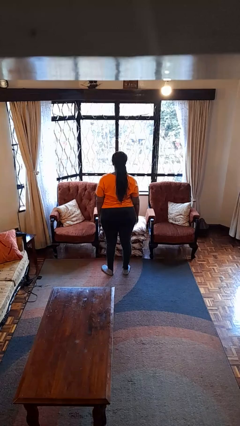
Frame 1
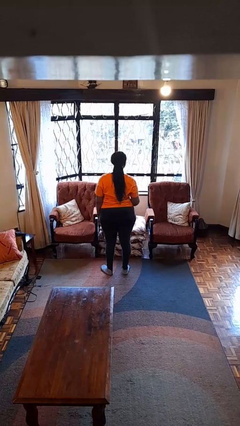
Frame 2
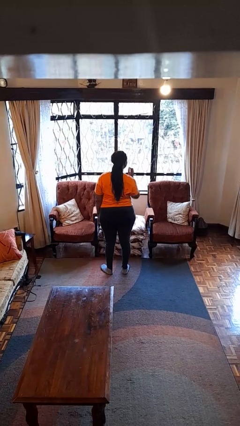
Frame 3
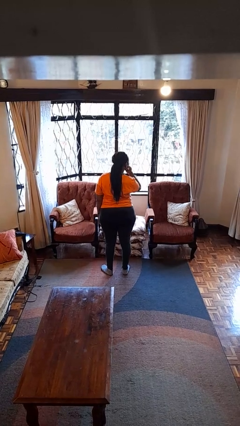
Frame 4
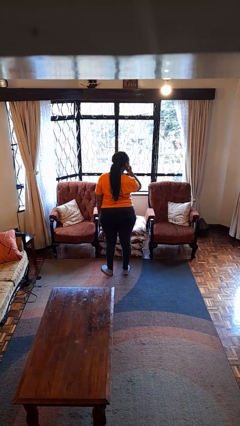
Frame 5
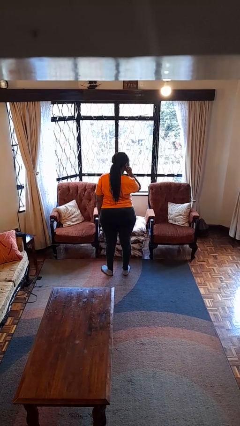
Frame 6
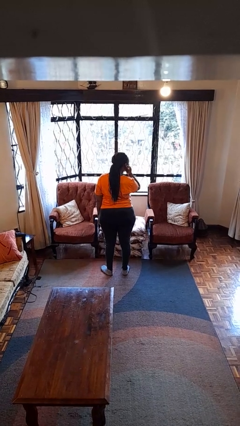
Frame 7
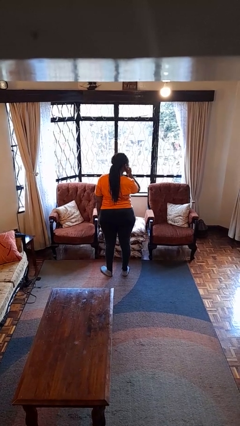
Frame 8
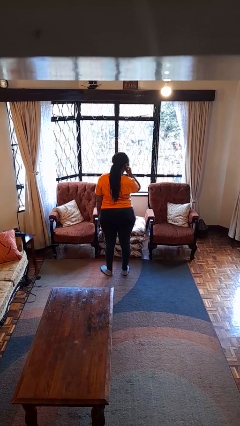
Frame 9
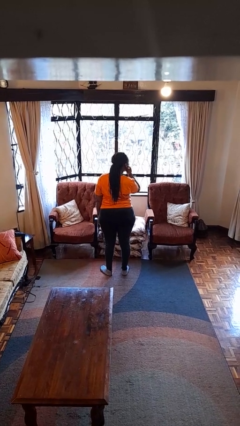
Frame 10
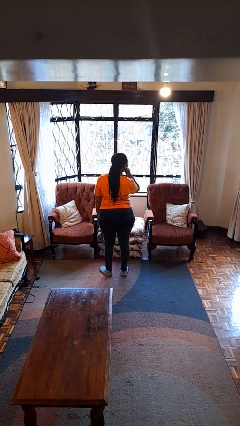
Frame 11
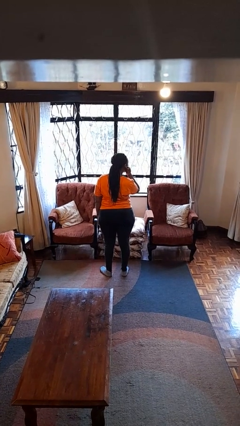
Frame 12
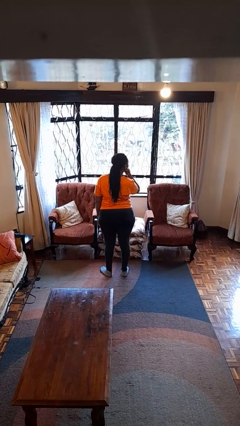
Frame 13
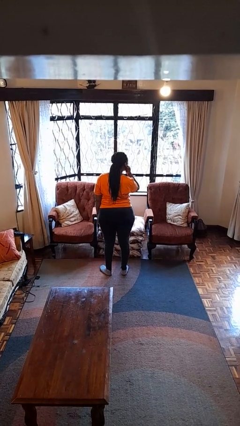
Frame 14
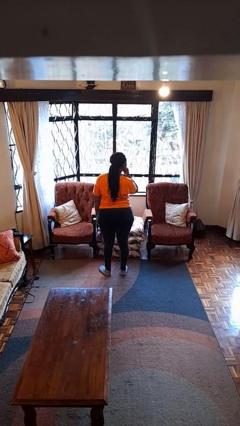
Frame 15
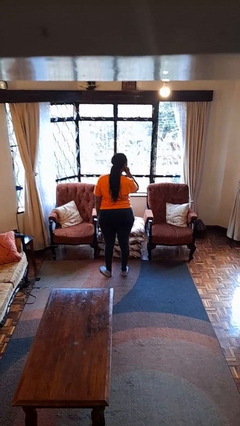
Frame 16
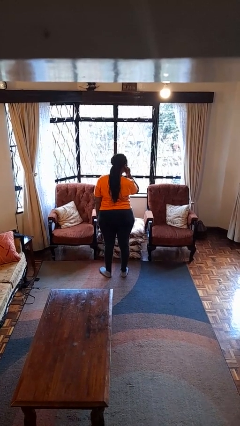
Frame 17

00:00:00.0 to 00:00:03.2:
person touches earlobe

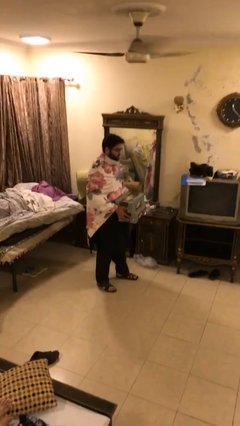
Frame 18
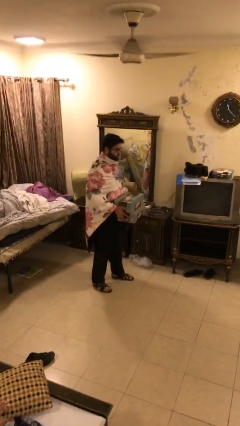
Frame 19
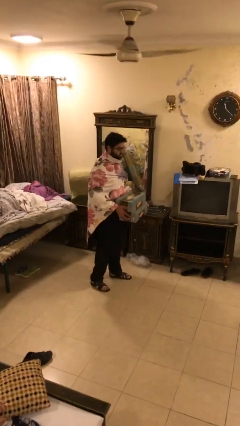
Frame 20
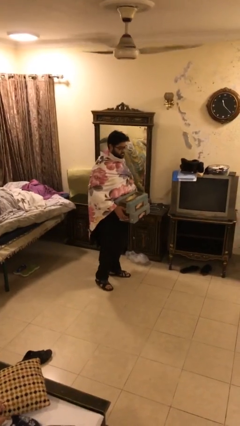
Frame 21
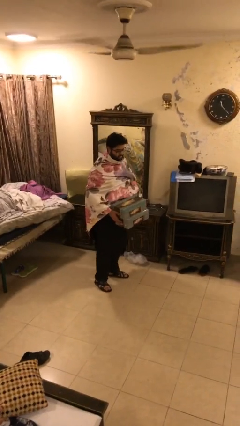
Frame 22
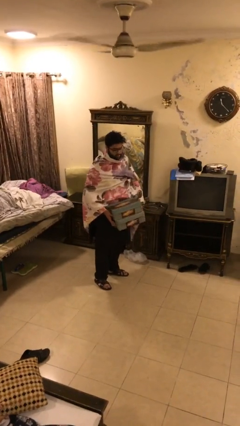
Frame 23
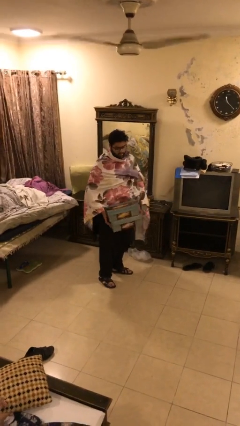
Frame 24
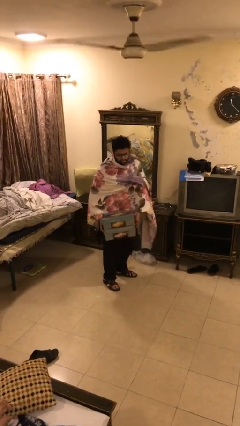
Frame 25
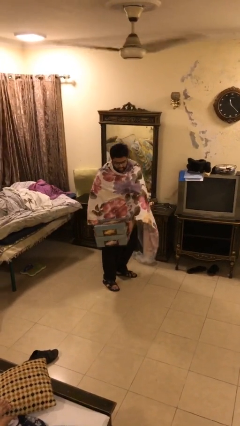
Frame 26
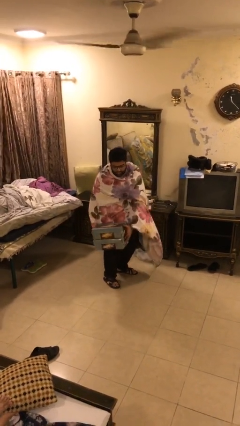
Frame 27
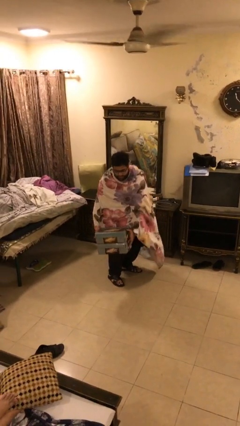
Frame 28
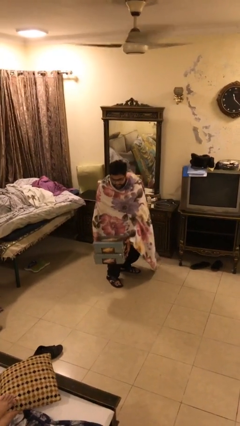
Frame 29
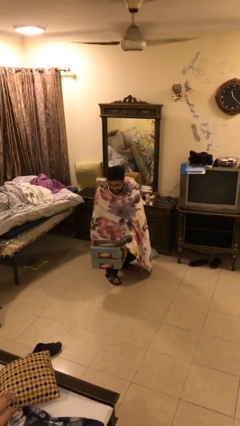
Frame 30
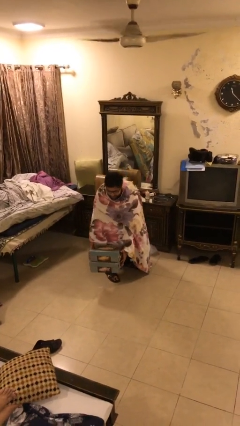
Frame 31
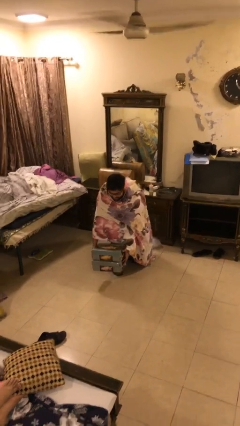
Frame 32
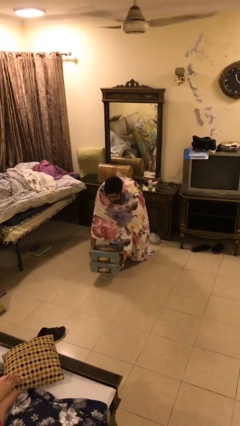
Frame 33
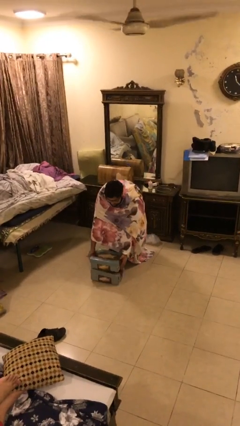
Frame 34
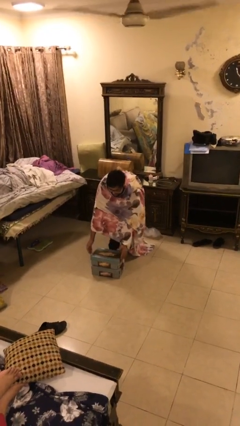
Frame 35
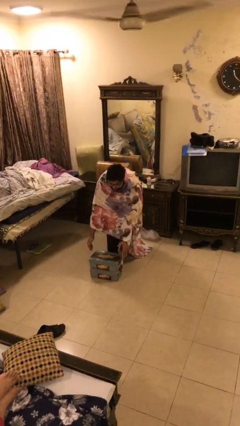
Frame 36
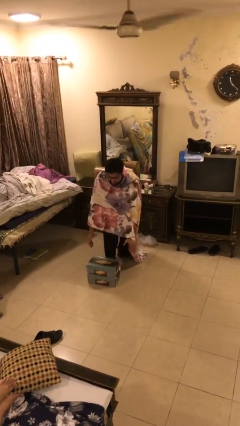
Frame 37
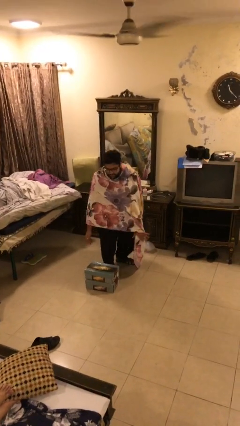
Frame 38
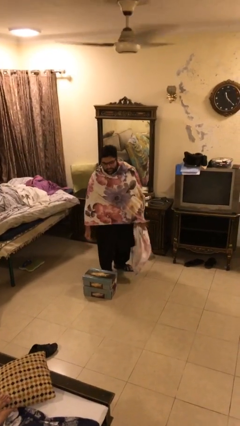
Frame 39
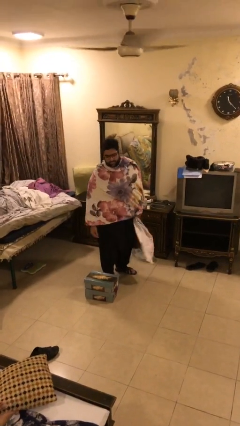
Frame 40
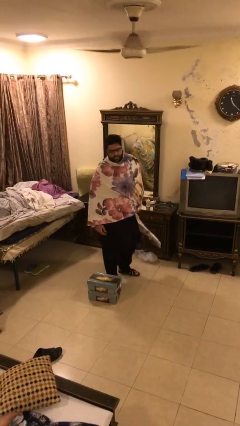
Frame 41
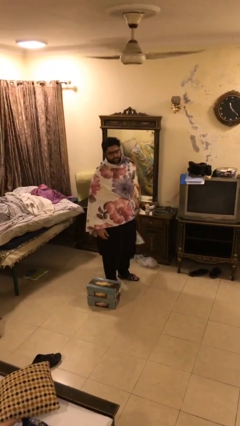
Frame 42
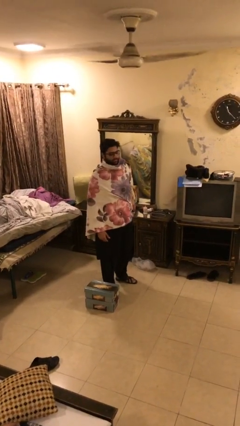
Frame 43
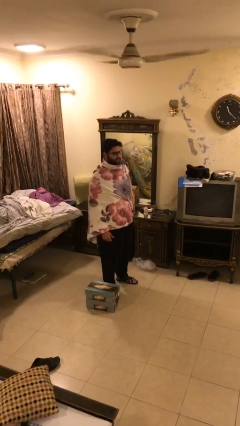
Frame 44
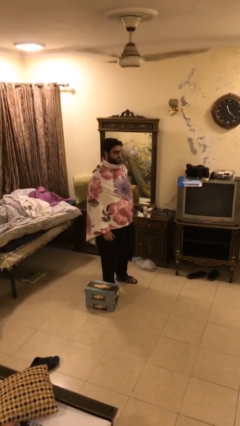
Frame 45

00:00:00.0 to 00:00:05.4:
person puts down object on floor

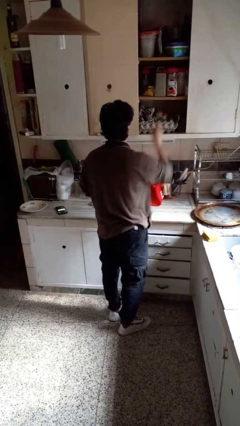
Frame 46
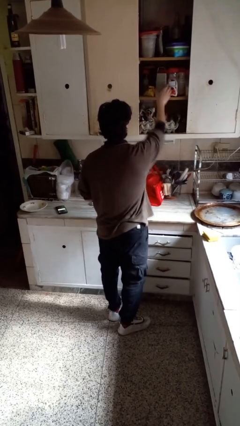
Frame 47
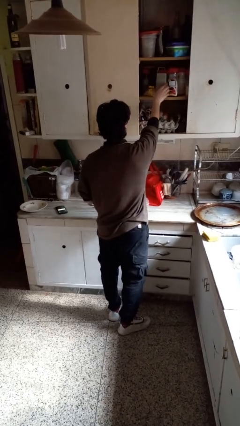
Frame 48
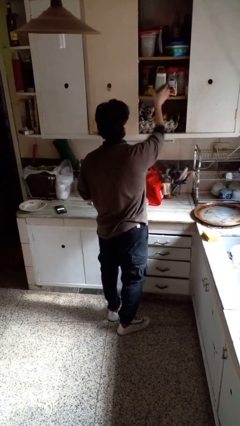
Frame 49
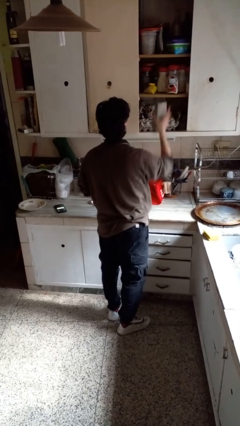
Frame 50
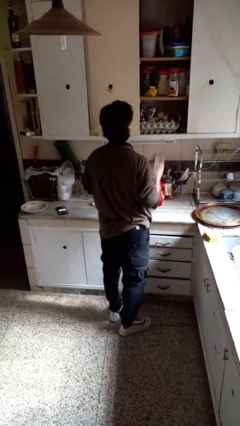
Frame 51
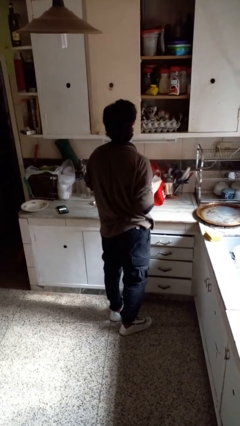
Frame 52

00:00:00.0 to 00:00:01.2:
person puts down object into cabinet

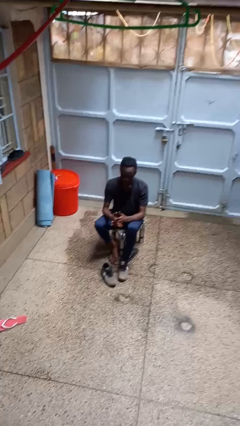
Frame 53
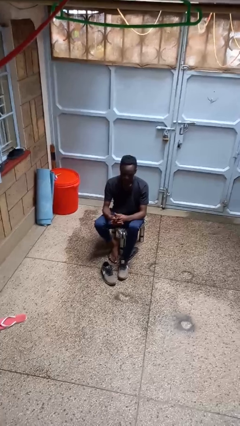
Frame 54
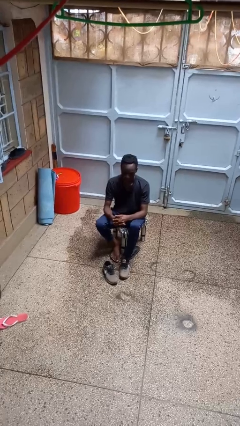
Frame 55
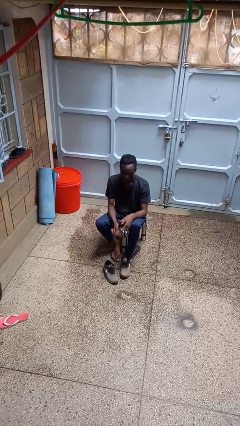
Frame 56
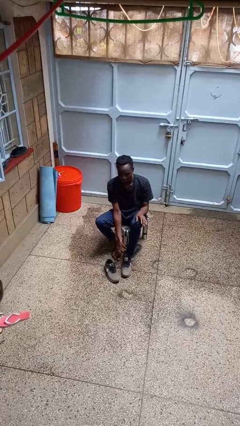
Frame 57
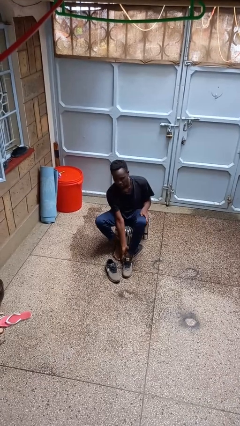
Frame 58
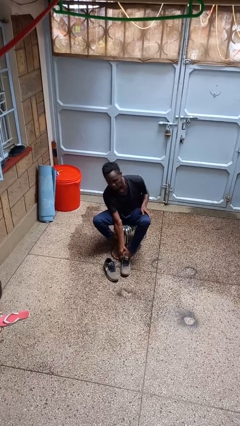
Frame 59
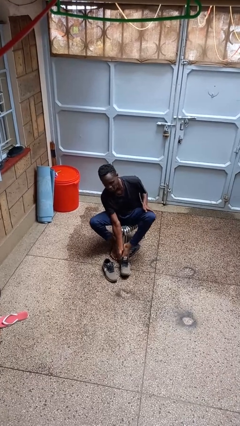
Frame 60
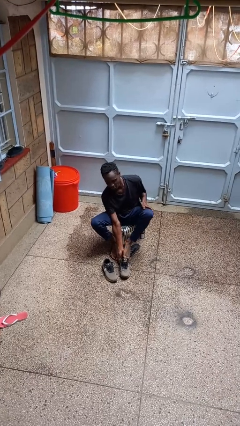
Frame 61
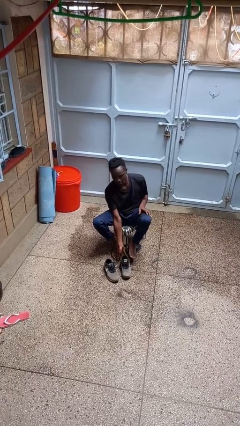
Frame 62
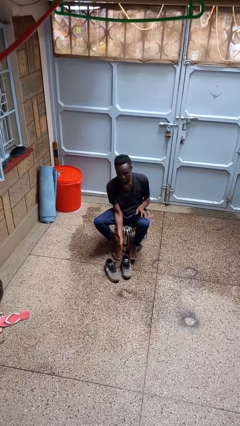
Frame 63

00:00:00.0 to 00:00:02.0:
person takes off shoes

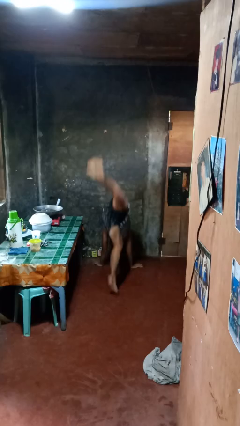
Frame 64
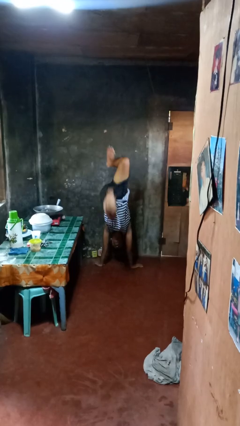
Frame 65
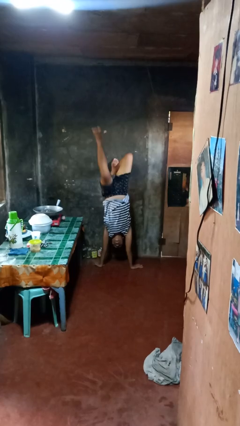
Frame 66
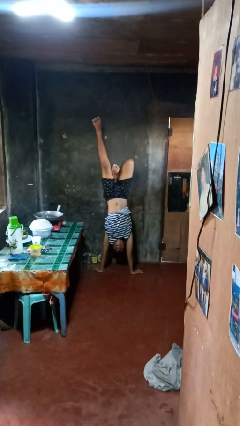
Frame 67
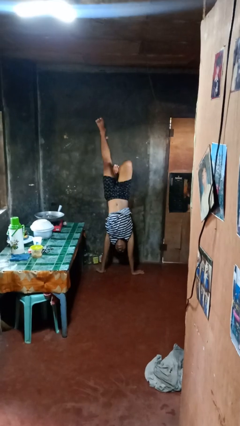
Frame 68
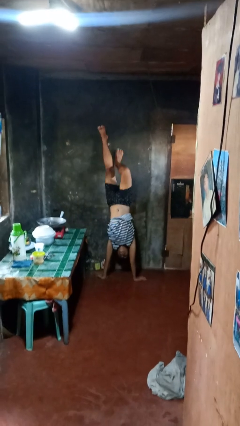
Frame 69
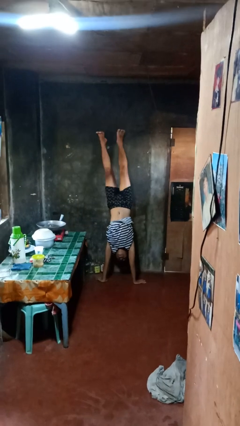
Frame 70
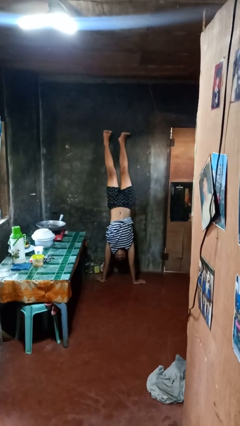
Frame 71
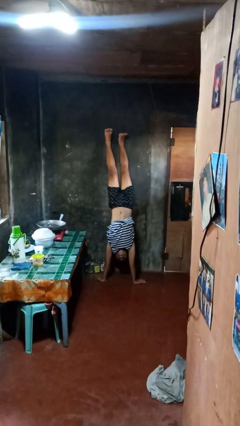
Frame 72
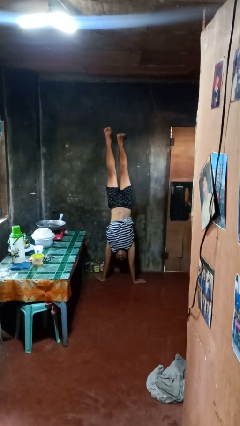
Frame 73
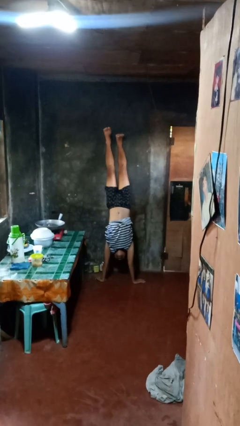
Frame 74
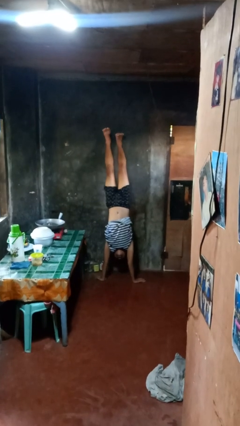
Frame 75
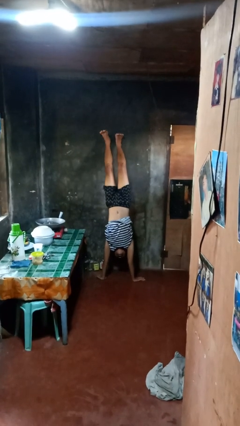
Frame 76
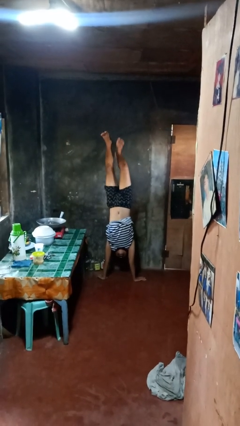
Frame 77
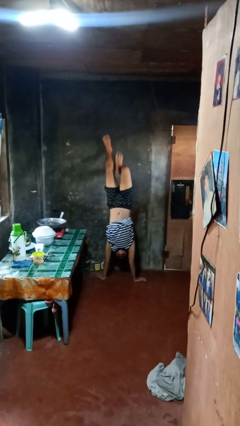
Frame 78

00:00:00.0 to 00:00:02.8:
person handstand

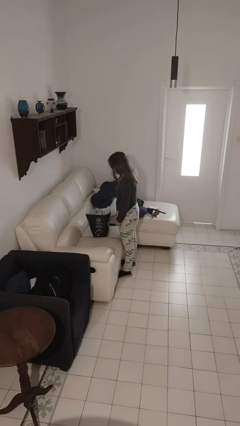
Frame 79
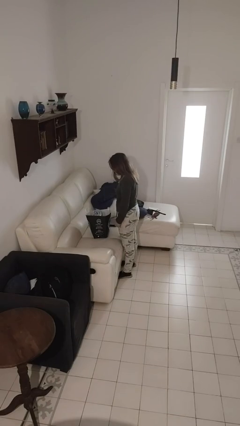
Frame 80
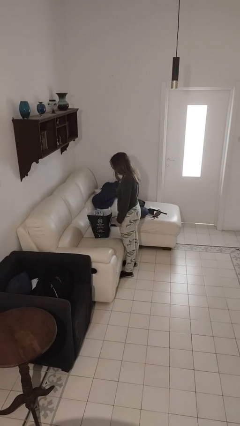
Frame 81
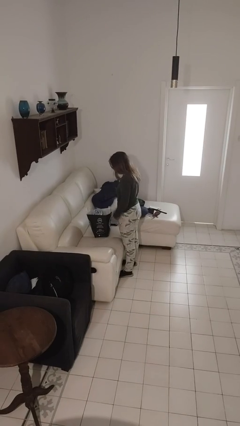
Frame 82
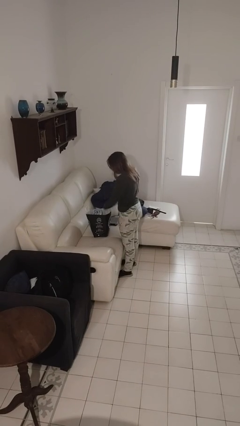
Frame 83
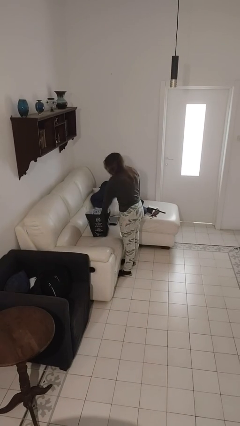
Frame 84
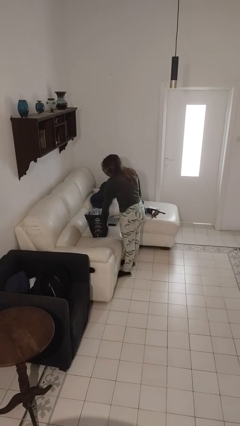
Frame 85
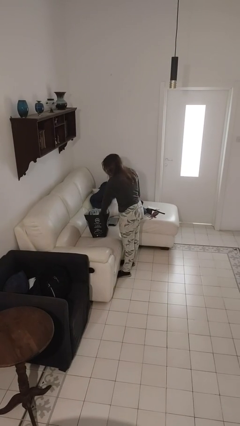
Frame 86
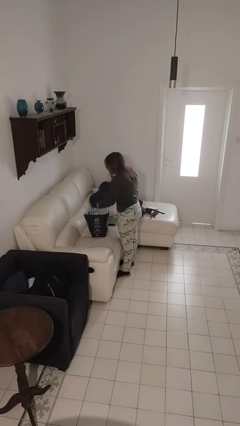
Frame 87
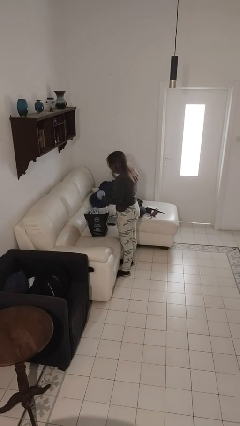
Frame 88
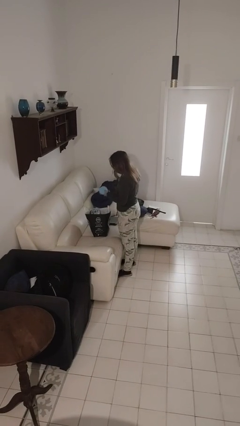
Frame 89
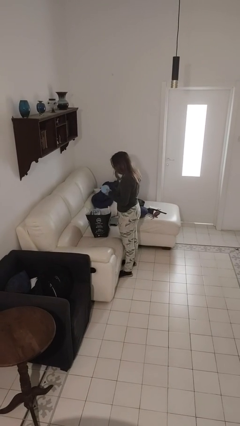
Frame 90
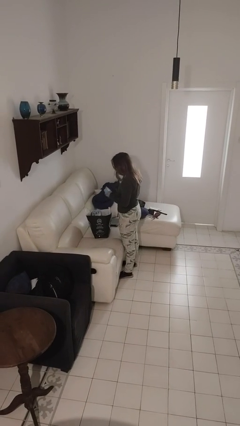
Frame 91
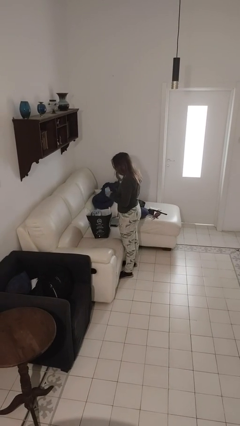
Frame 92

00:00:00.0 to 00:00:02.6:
person takes object from bag
